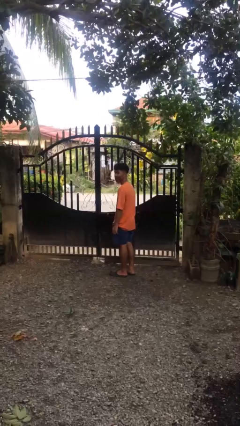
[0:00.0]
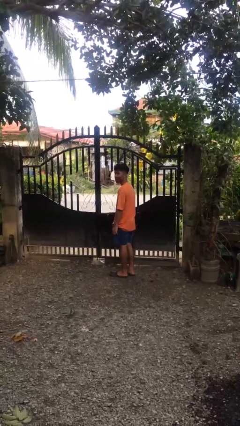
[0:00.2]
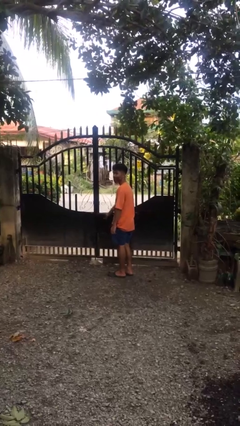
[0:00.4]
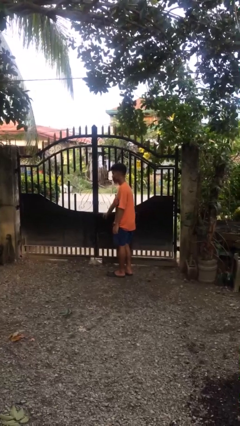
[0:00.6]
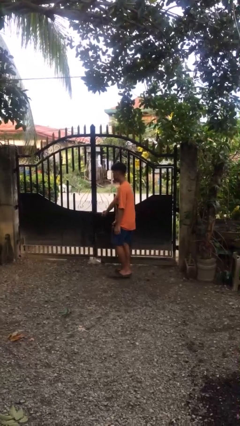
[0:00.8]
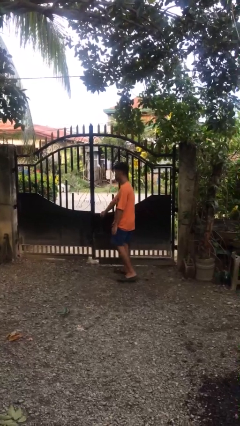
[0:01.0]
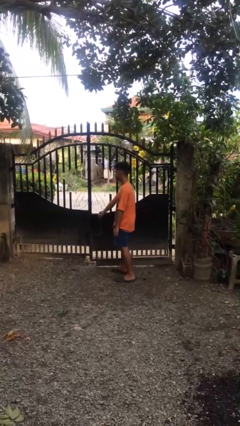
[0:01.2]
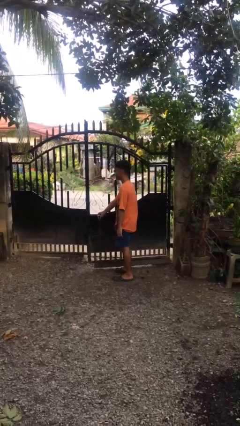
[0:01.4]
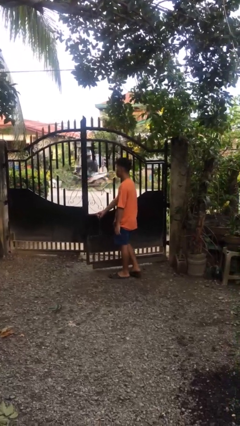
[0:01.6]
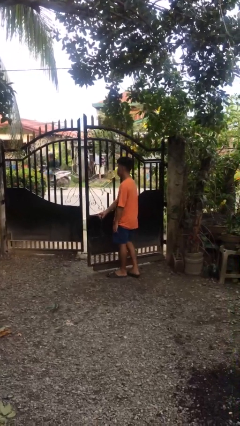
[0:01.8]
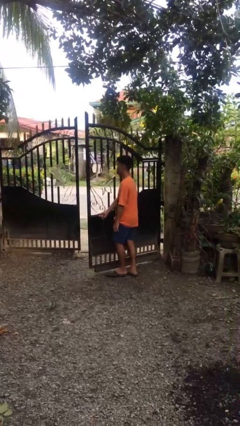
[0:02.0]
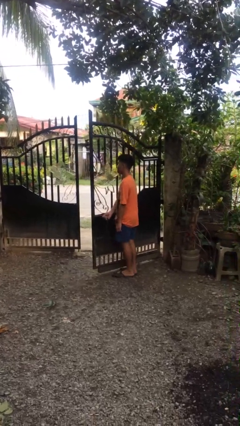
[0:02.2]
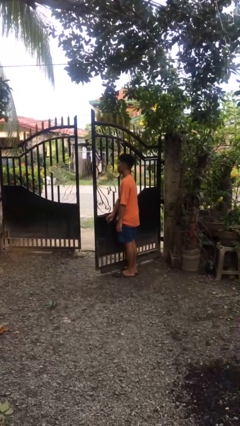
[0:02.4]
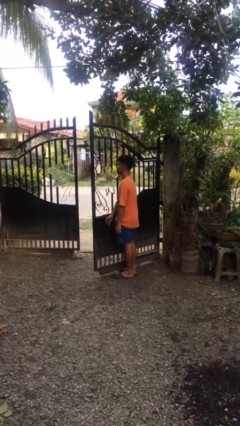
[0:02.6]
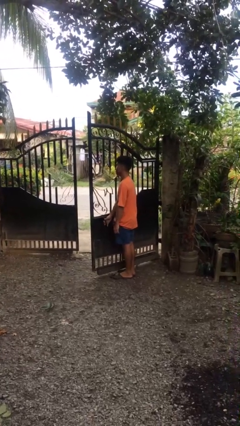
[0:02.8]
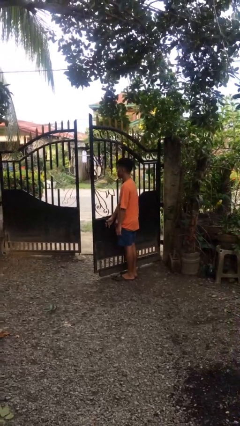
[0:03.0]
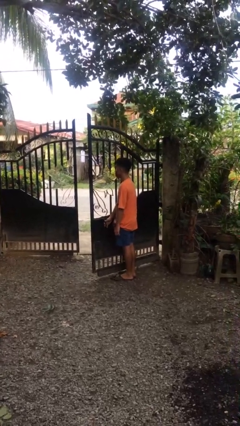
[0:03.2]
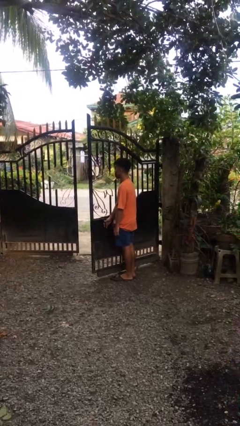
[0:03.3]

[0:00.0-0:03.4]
person opens gate

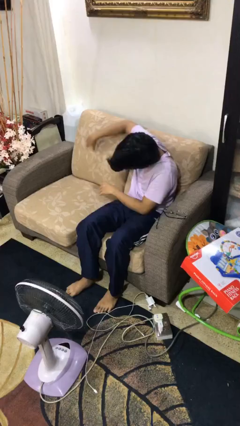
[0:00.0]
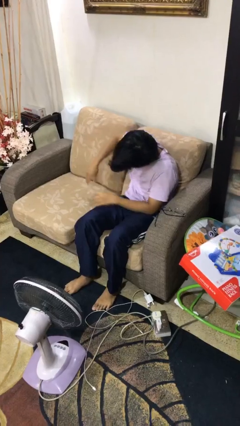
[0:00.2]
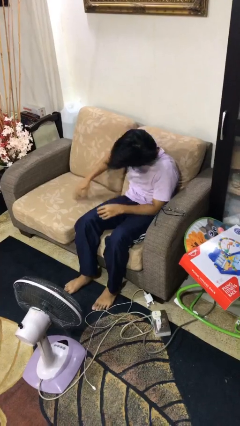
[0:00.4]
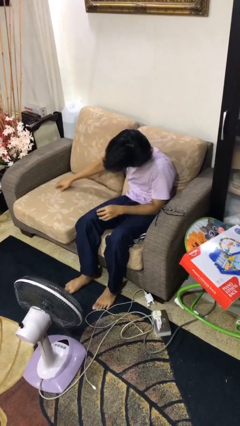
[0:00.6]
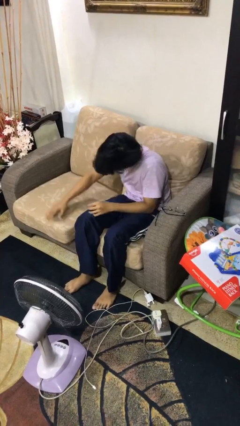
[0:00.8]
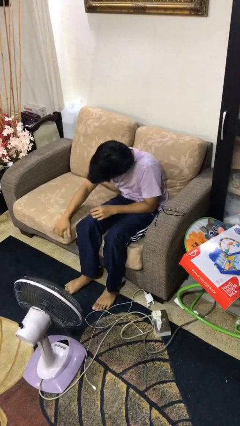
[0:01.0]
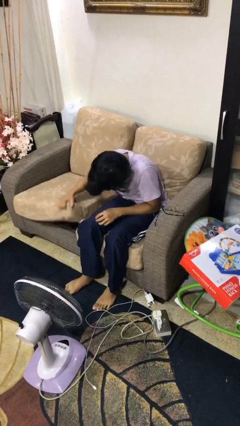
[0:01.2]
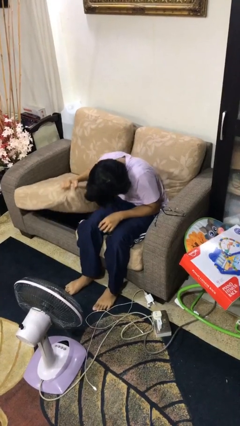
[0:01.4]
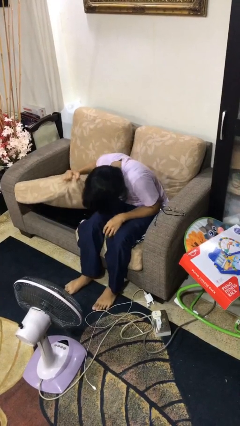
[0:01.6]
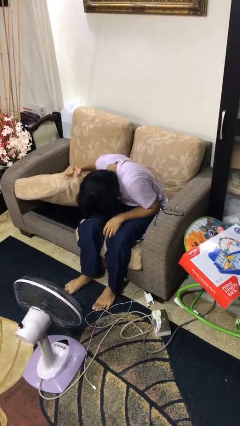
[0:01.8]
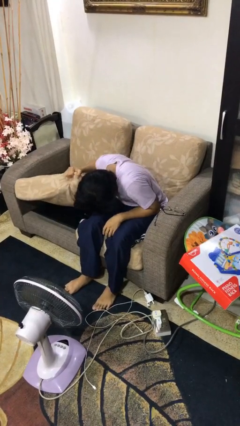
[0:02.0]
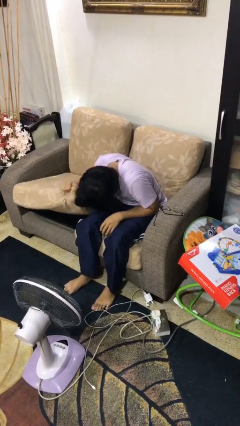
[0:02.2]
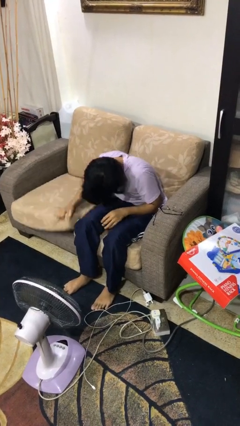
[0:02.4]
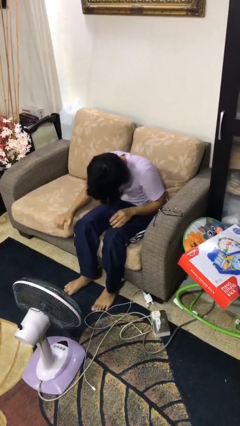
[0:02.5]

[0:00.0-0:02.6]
person searches in couch

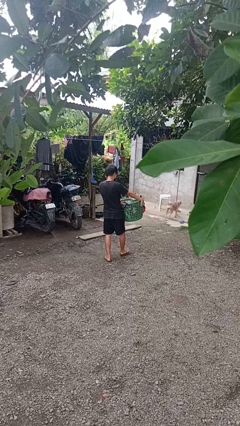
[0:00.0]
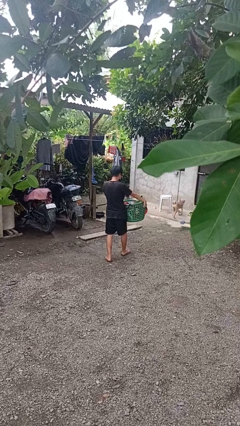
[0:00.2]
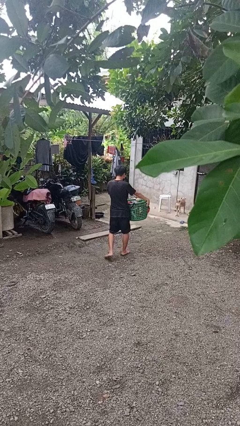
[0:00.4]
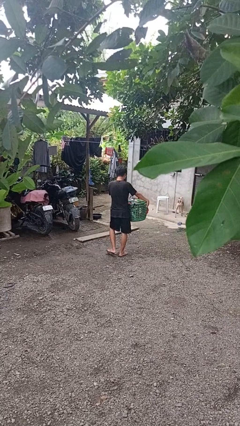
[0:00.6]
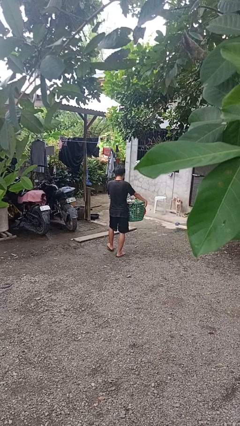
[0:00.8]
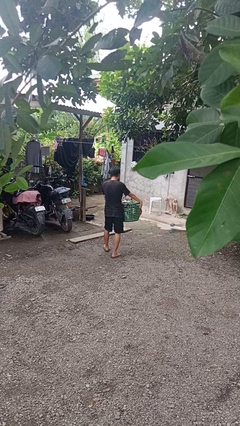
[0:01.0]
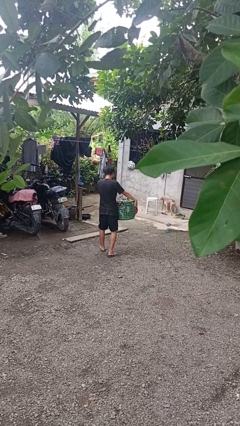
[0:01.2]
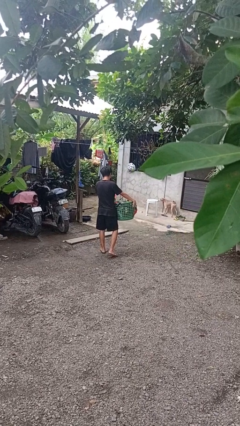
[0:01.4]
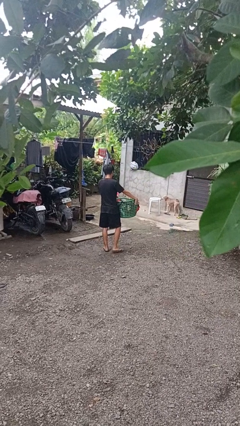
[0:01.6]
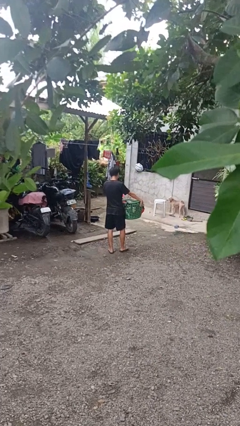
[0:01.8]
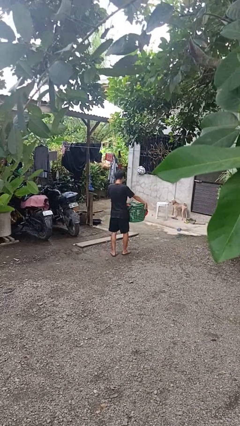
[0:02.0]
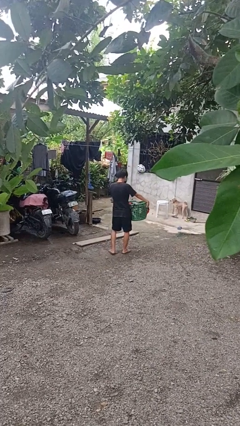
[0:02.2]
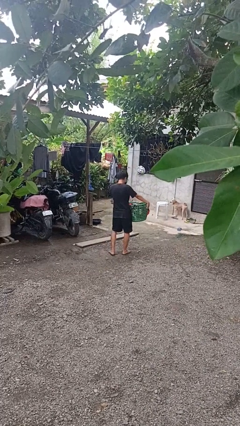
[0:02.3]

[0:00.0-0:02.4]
person carries laundry basket

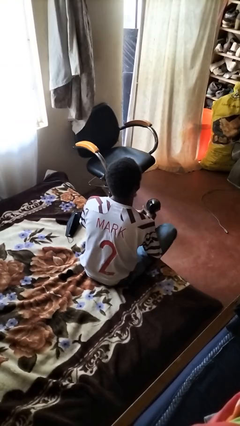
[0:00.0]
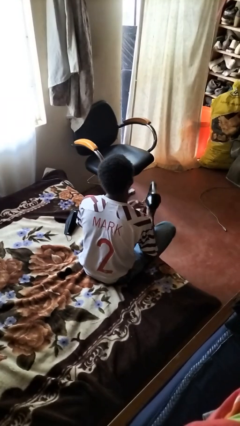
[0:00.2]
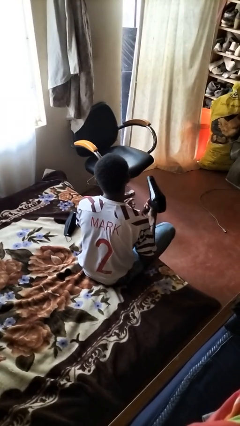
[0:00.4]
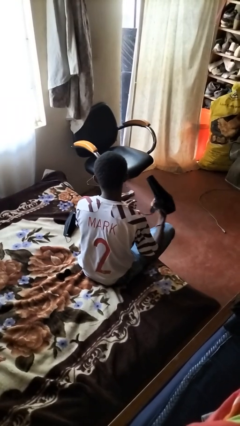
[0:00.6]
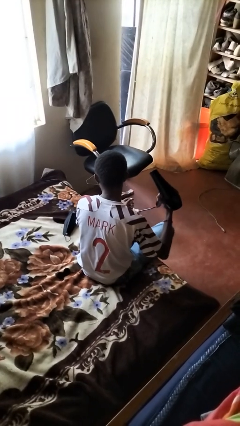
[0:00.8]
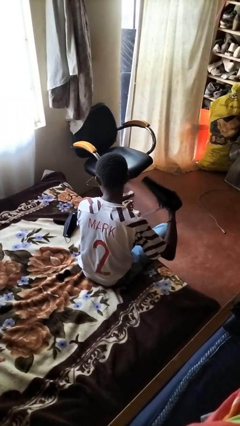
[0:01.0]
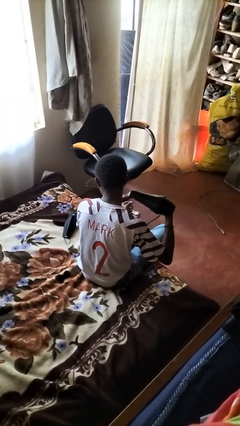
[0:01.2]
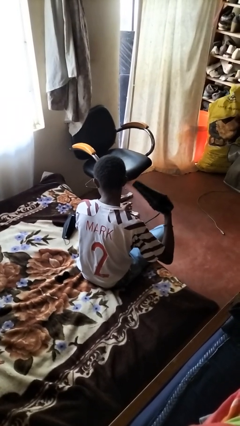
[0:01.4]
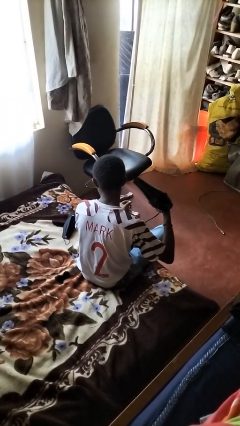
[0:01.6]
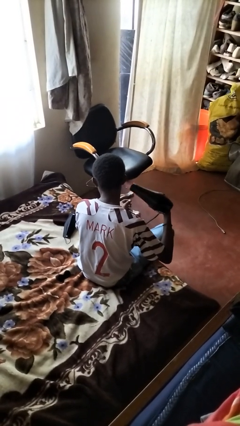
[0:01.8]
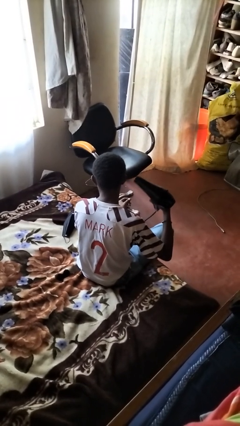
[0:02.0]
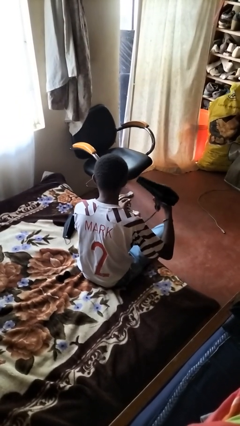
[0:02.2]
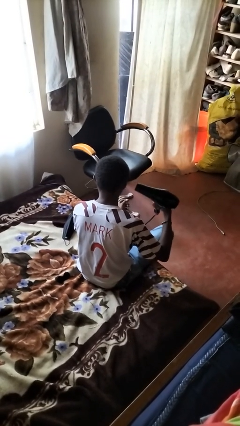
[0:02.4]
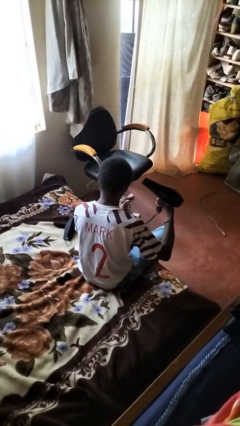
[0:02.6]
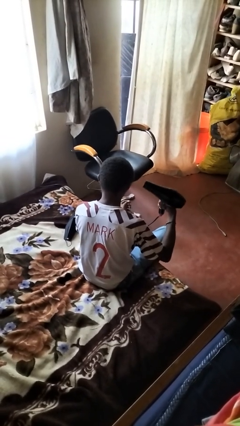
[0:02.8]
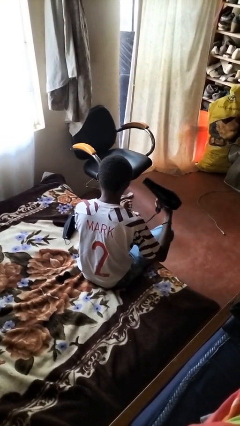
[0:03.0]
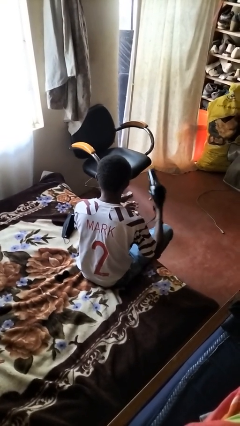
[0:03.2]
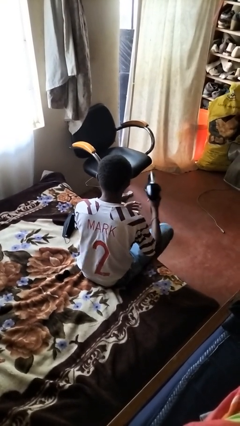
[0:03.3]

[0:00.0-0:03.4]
person dries hair with hairdryer

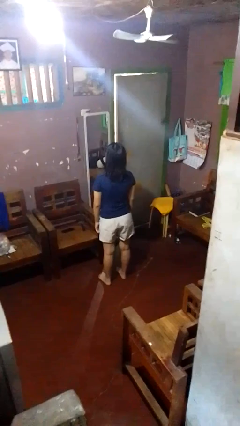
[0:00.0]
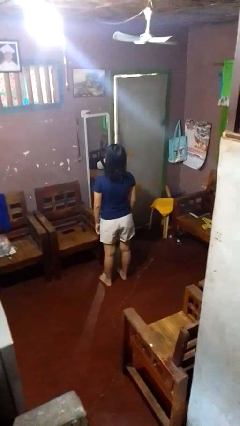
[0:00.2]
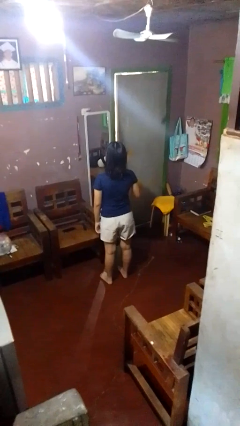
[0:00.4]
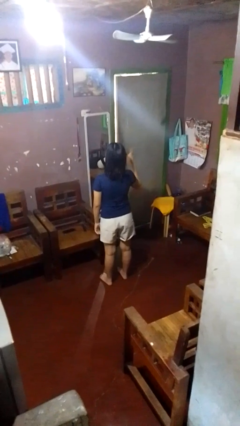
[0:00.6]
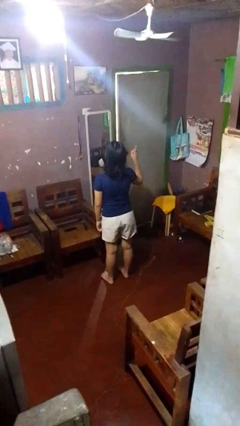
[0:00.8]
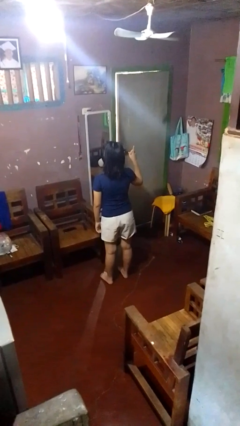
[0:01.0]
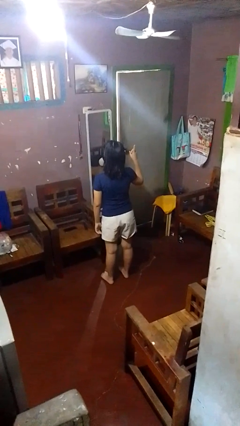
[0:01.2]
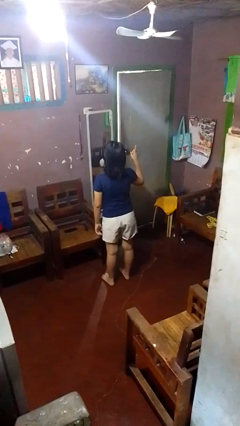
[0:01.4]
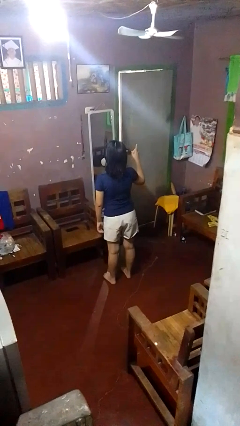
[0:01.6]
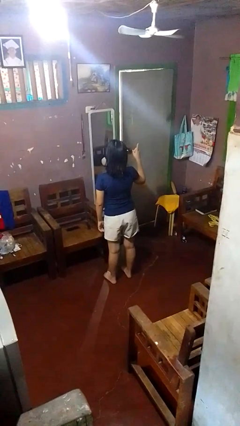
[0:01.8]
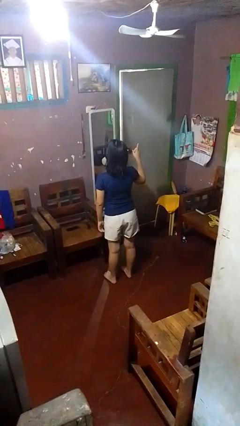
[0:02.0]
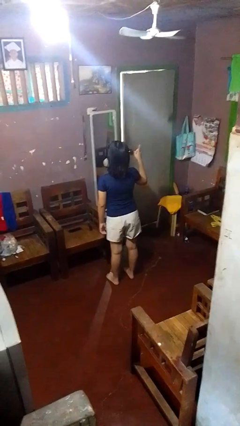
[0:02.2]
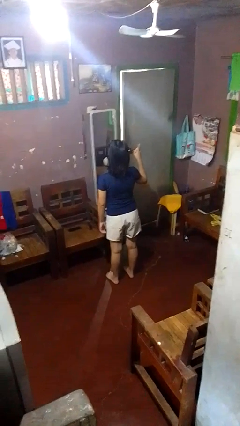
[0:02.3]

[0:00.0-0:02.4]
person gestures number one

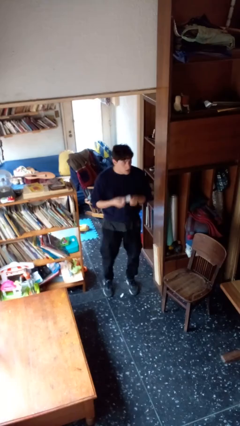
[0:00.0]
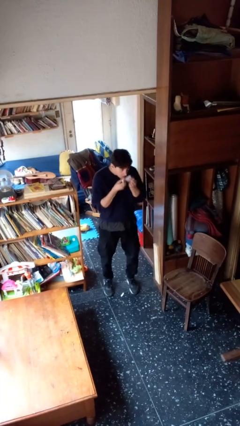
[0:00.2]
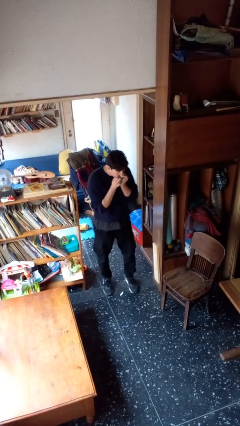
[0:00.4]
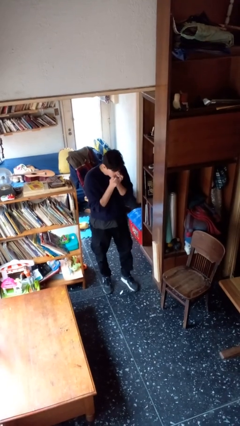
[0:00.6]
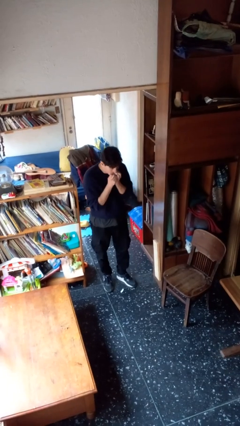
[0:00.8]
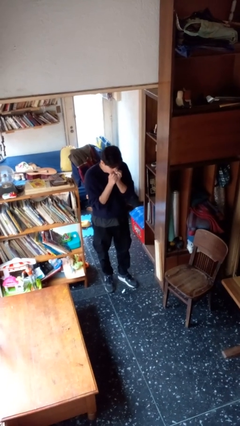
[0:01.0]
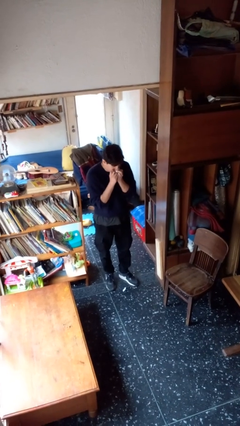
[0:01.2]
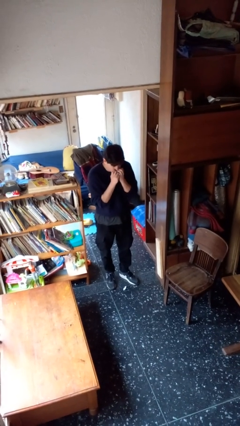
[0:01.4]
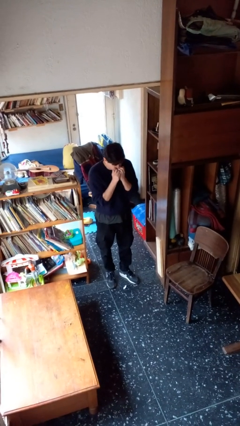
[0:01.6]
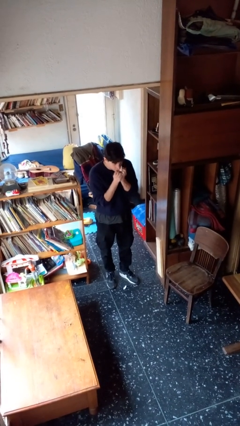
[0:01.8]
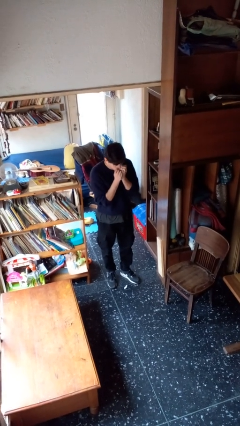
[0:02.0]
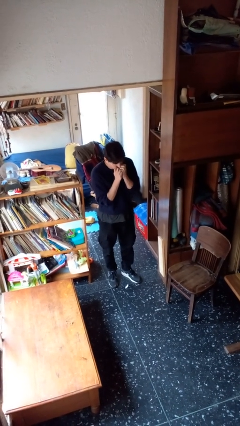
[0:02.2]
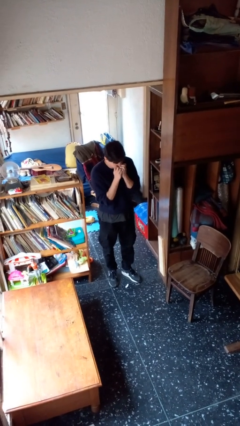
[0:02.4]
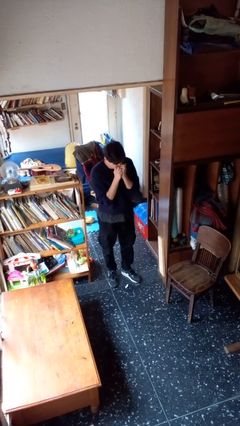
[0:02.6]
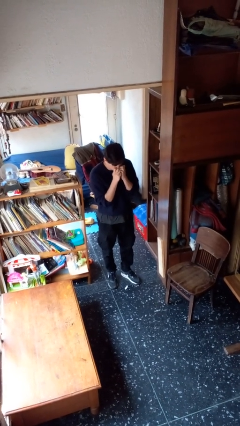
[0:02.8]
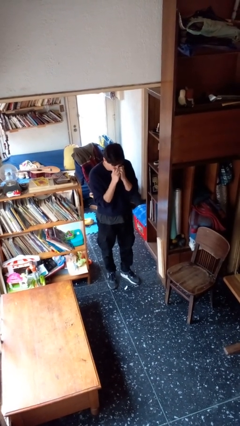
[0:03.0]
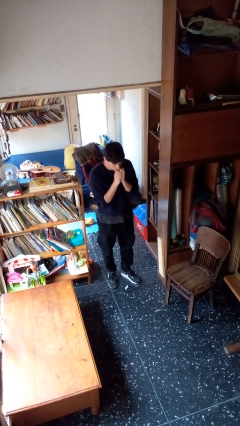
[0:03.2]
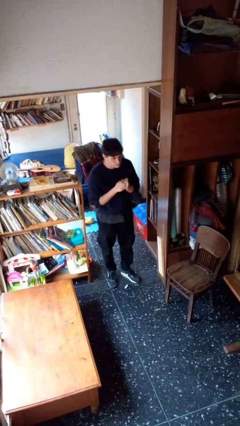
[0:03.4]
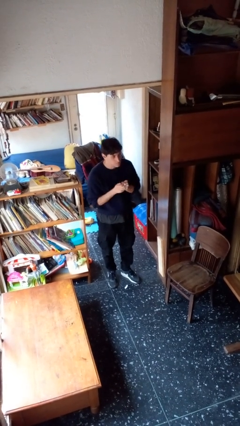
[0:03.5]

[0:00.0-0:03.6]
person blows nose
